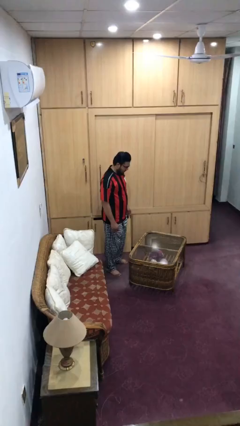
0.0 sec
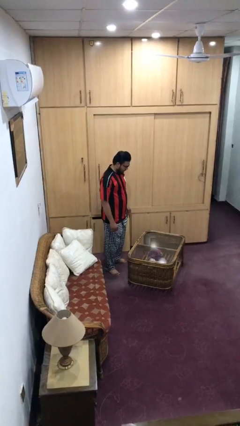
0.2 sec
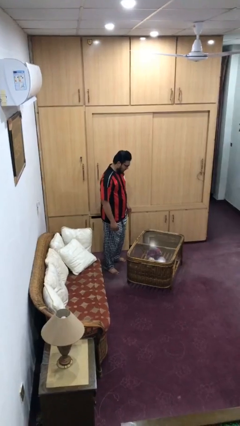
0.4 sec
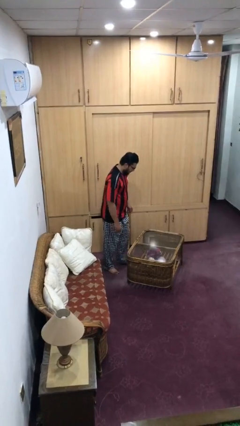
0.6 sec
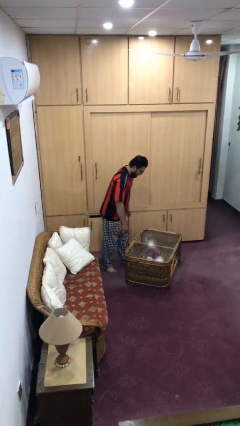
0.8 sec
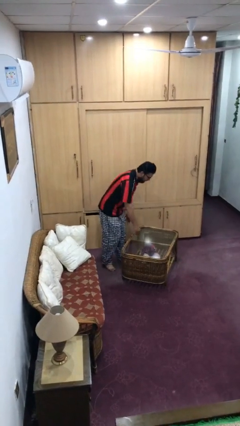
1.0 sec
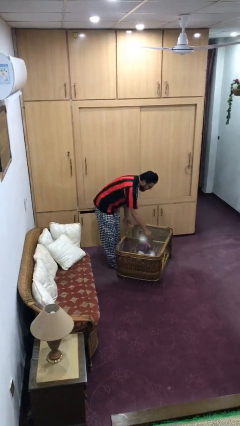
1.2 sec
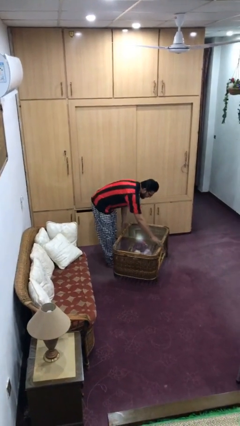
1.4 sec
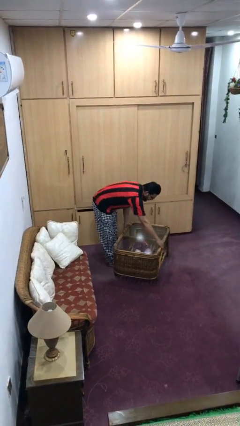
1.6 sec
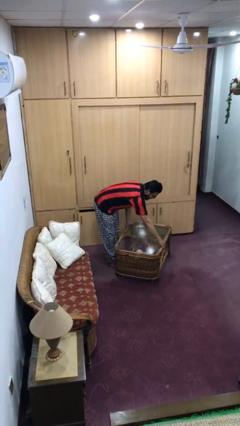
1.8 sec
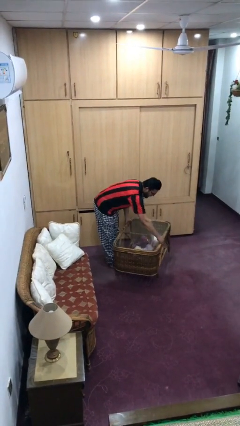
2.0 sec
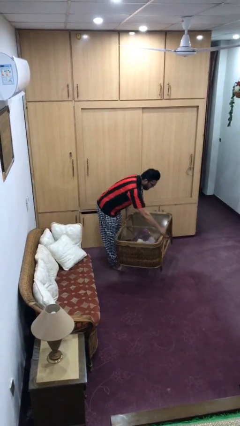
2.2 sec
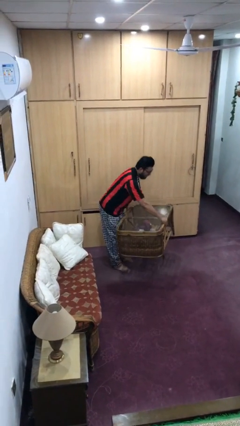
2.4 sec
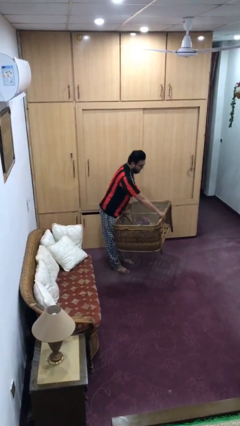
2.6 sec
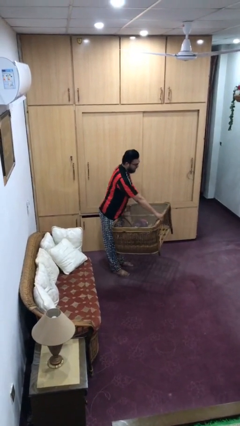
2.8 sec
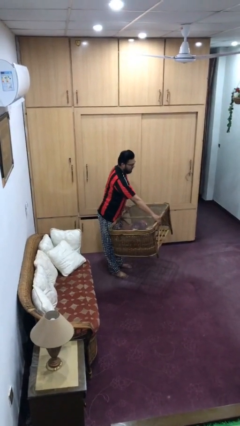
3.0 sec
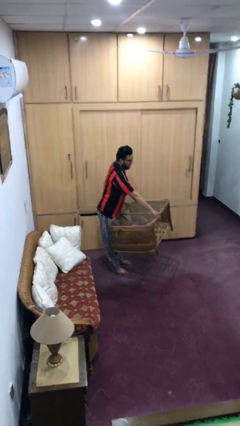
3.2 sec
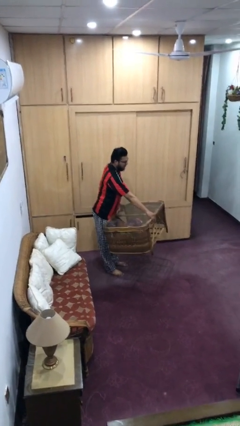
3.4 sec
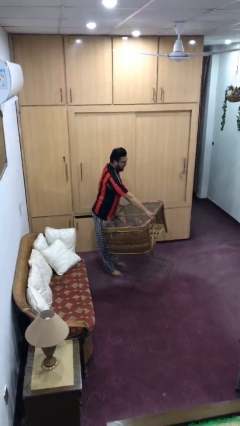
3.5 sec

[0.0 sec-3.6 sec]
person picks up object from floor

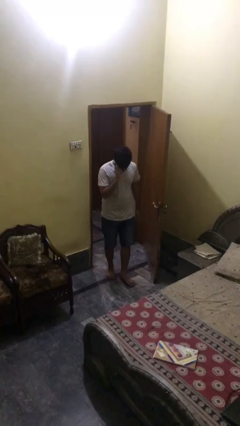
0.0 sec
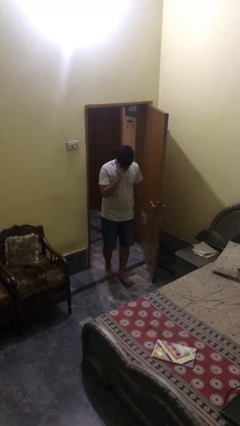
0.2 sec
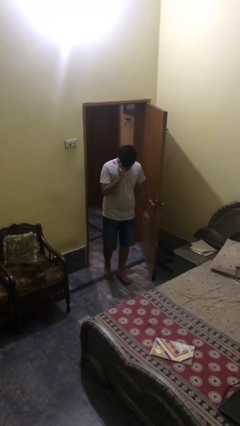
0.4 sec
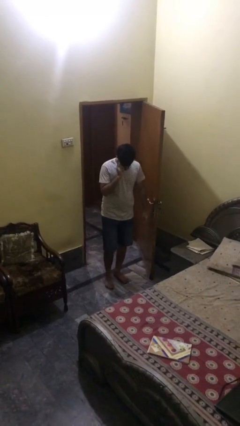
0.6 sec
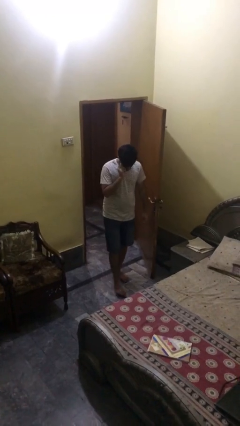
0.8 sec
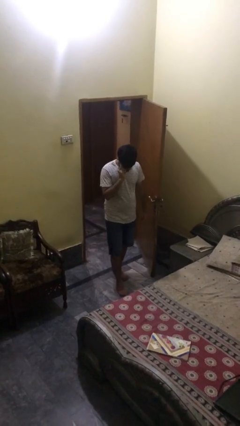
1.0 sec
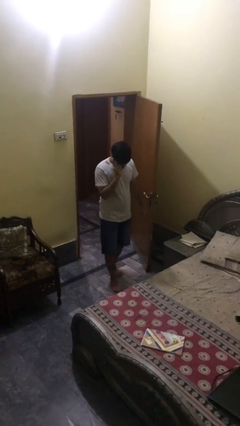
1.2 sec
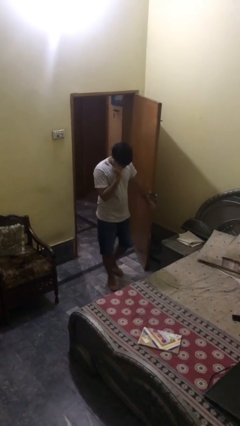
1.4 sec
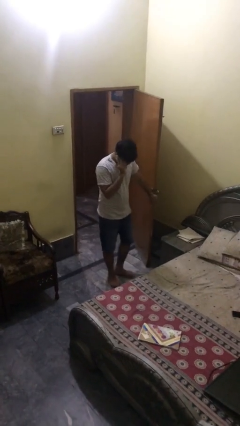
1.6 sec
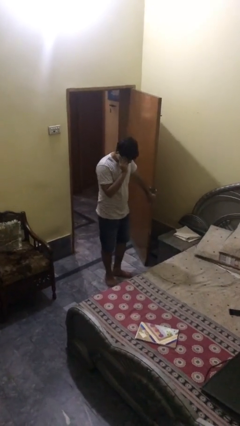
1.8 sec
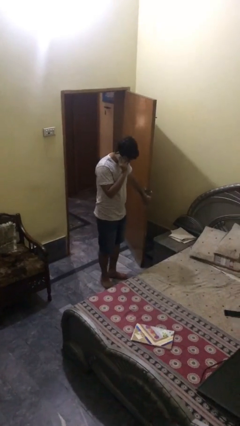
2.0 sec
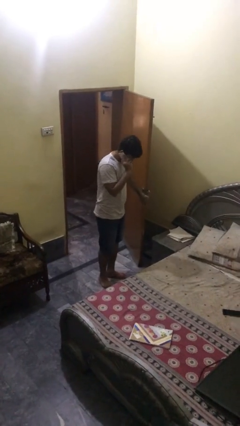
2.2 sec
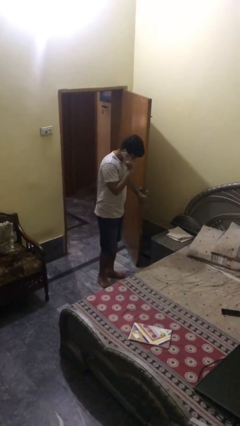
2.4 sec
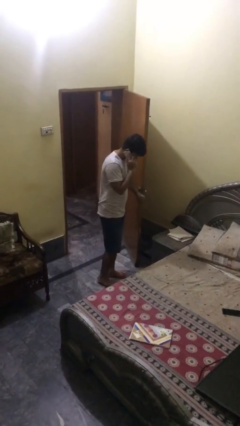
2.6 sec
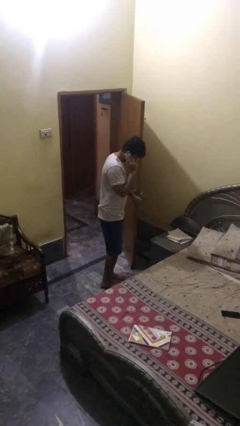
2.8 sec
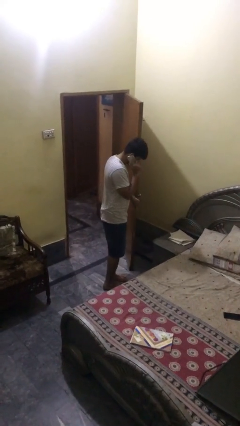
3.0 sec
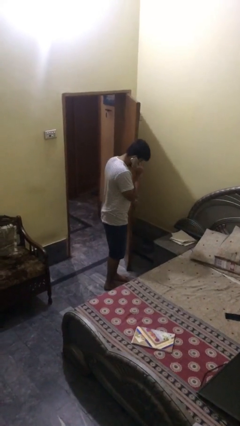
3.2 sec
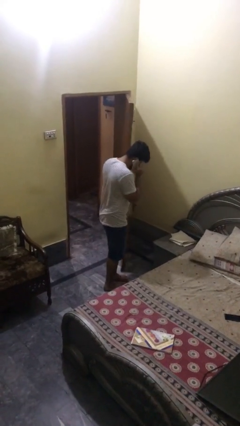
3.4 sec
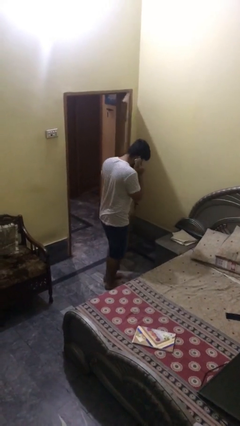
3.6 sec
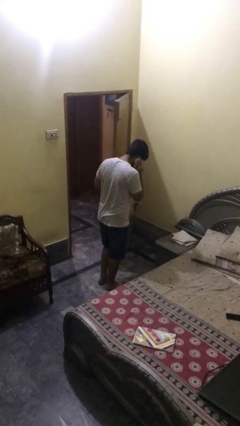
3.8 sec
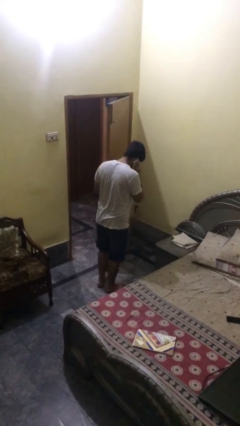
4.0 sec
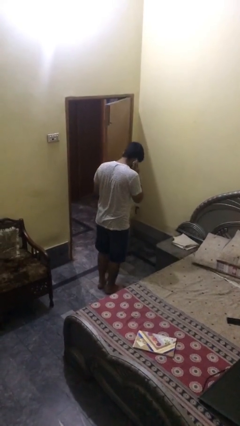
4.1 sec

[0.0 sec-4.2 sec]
person enters scene through structure

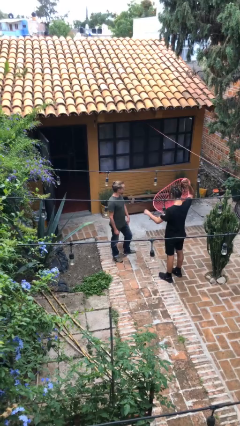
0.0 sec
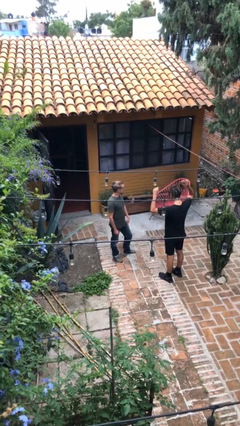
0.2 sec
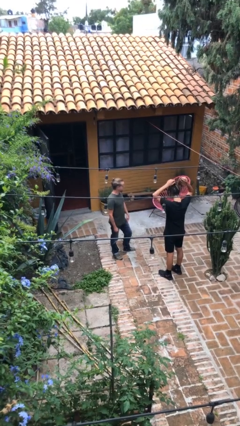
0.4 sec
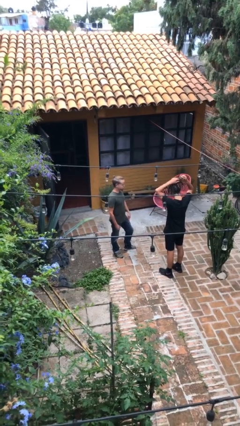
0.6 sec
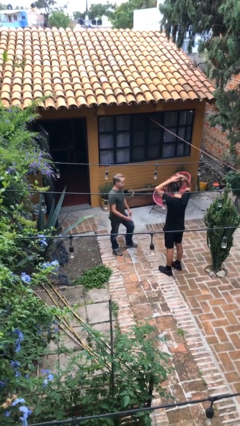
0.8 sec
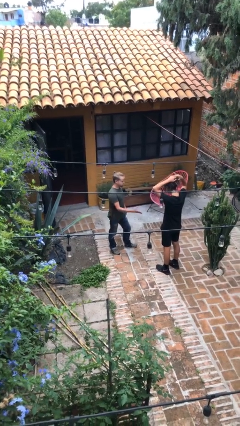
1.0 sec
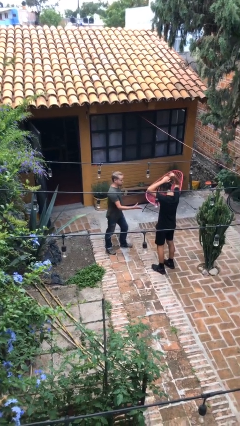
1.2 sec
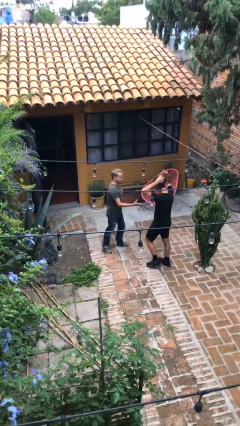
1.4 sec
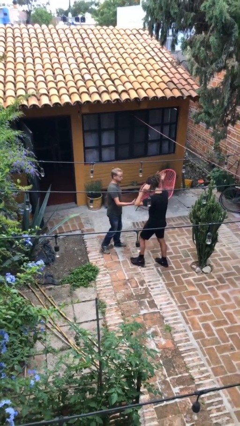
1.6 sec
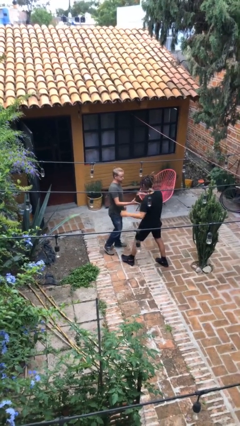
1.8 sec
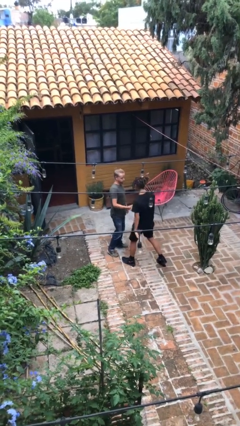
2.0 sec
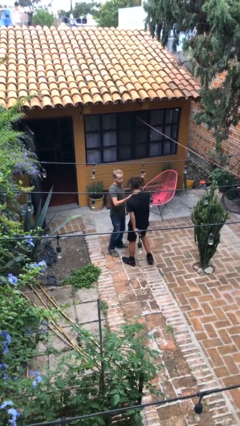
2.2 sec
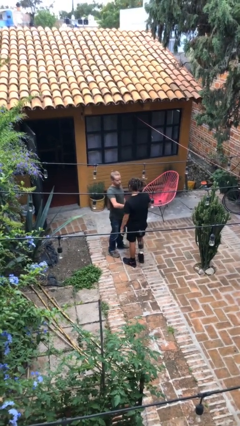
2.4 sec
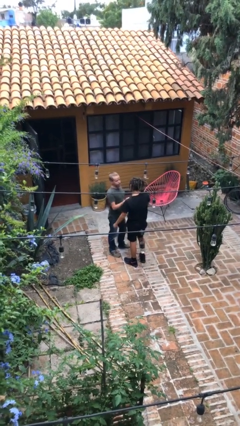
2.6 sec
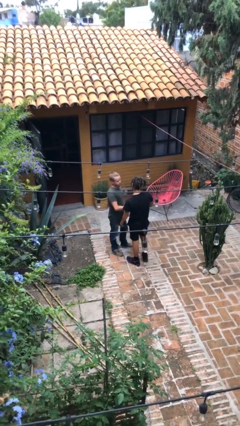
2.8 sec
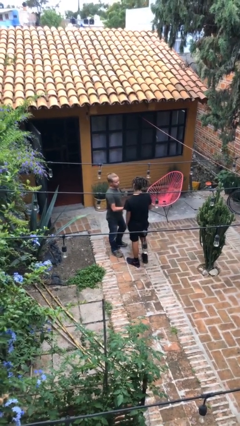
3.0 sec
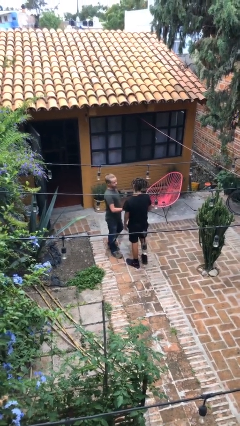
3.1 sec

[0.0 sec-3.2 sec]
person shakes hand

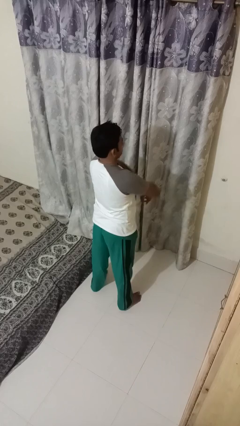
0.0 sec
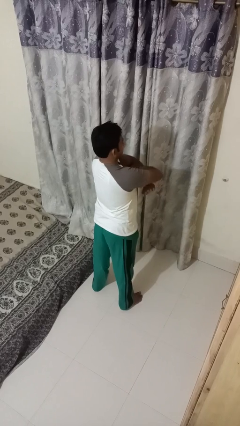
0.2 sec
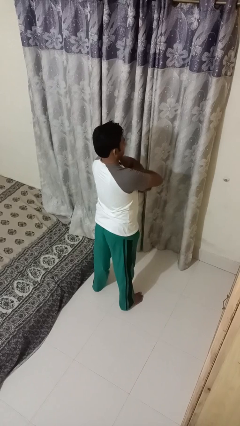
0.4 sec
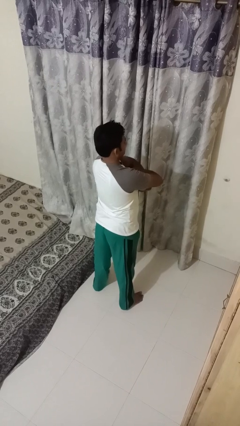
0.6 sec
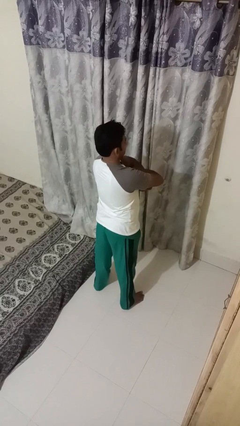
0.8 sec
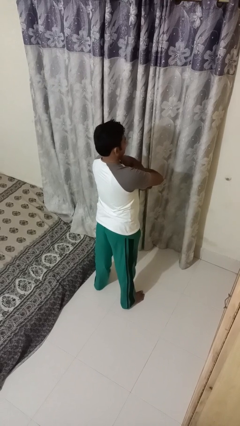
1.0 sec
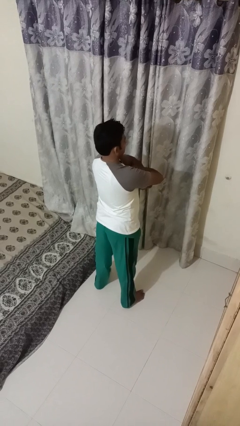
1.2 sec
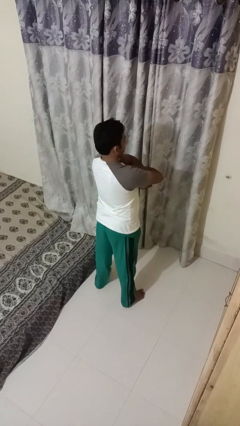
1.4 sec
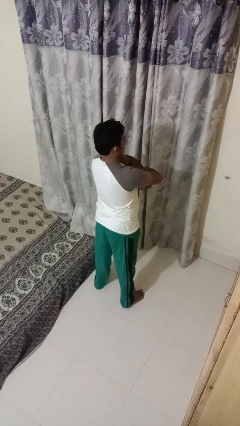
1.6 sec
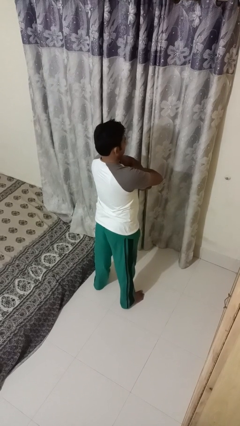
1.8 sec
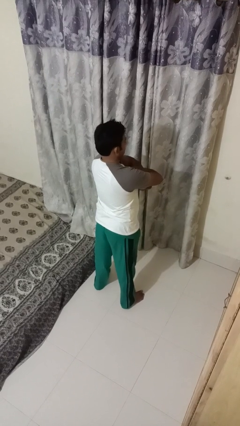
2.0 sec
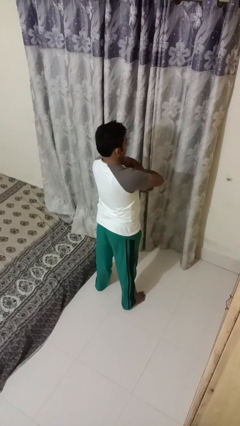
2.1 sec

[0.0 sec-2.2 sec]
person gestures arms x

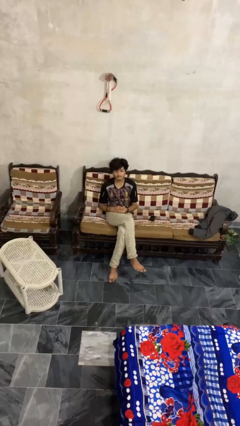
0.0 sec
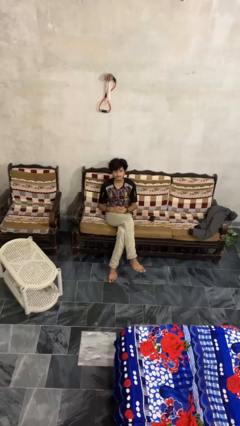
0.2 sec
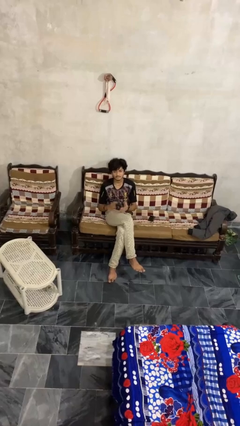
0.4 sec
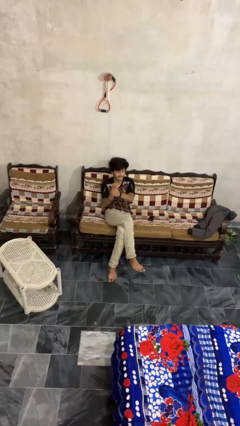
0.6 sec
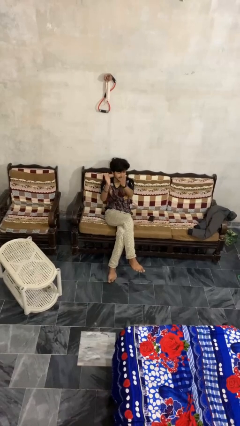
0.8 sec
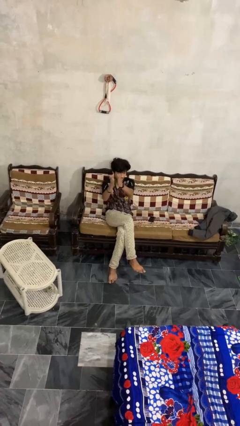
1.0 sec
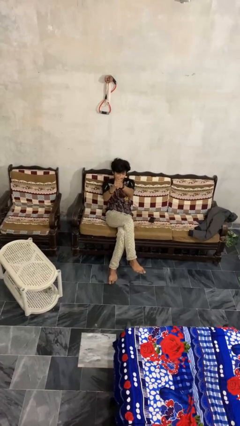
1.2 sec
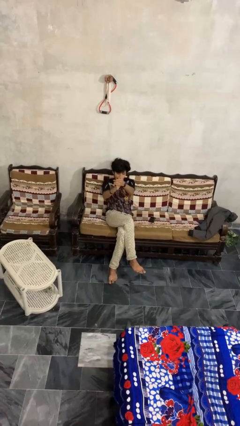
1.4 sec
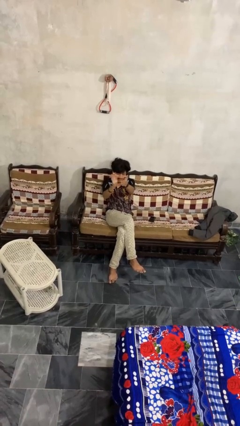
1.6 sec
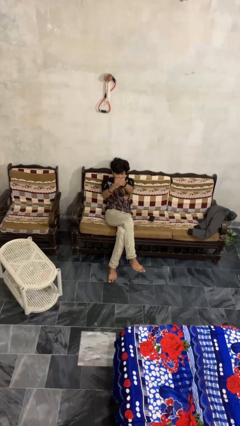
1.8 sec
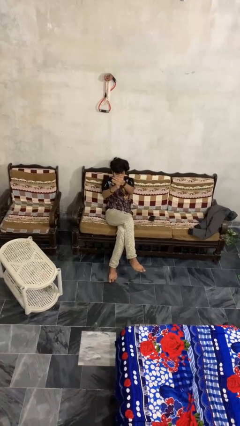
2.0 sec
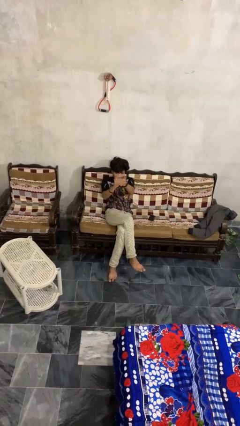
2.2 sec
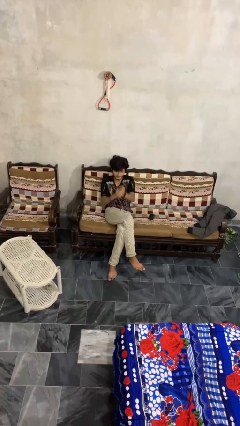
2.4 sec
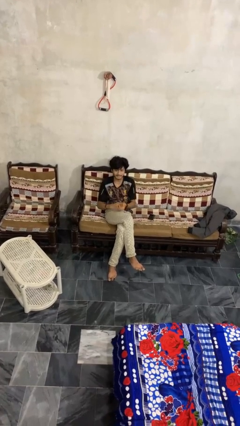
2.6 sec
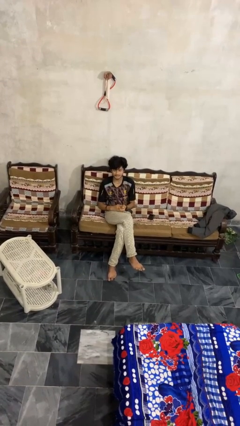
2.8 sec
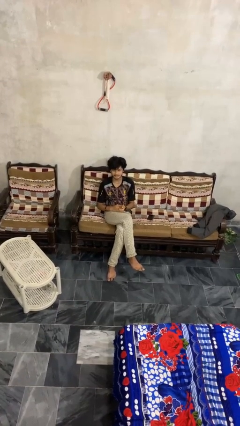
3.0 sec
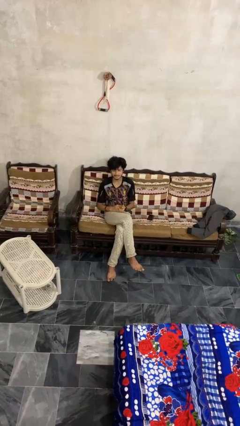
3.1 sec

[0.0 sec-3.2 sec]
person claps hands

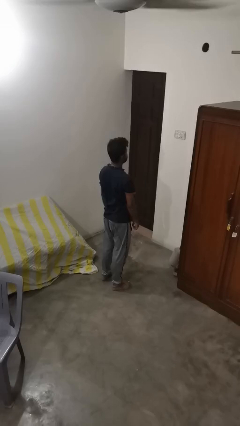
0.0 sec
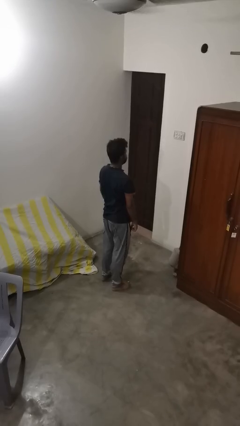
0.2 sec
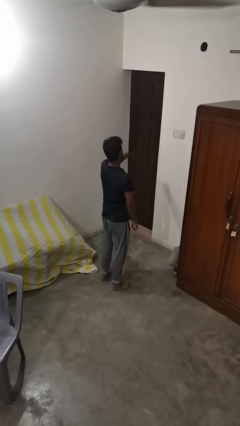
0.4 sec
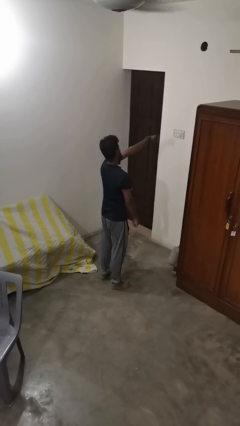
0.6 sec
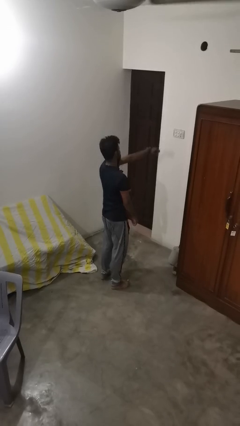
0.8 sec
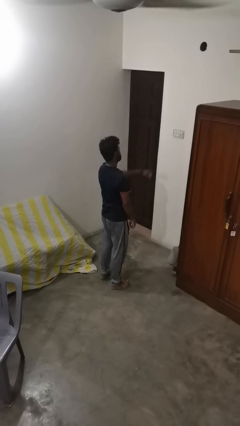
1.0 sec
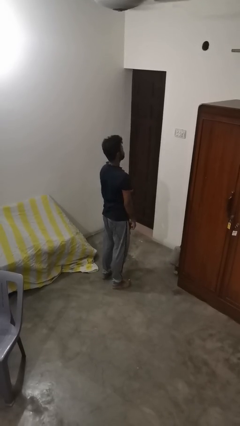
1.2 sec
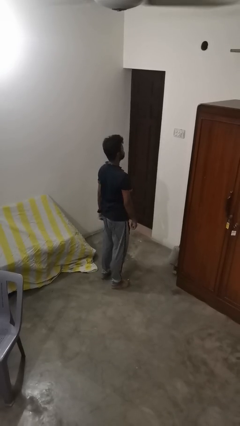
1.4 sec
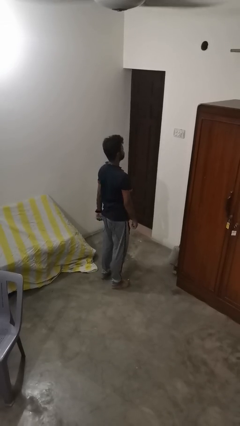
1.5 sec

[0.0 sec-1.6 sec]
person punches
